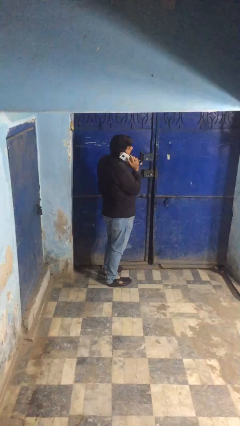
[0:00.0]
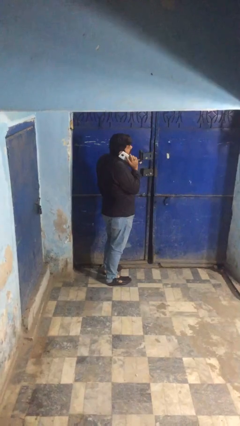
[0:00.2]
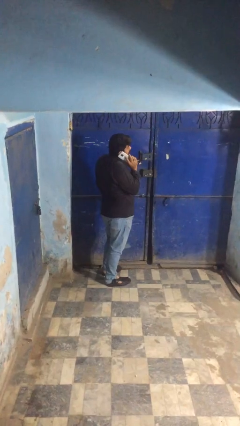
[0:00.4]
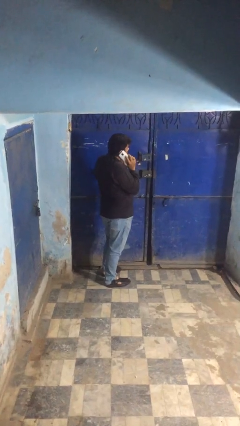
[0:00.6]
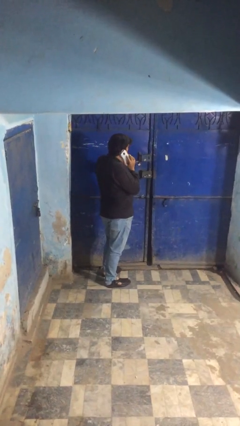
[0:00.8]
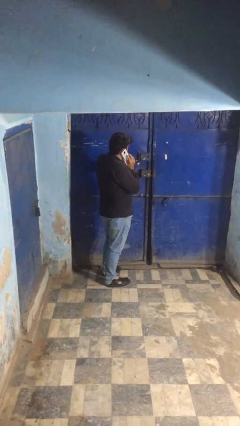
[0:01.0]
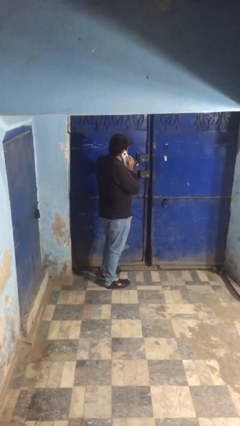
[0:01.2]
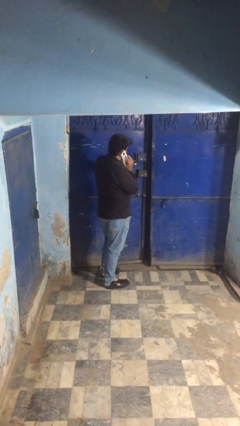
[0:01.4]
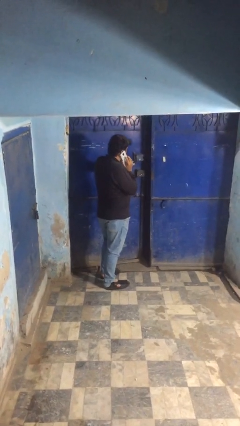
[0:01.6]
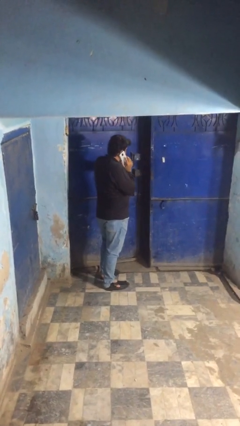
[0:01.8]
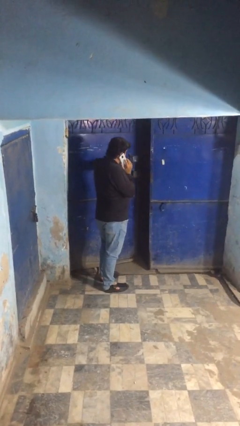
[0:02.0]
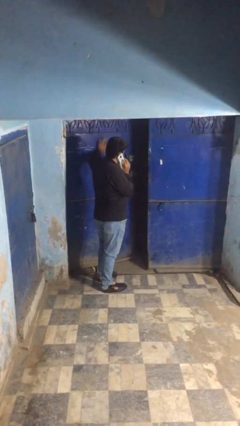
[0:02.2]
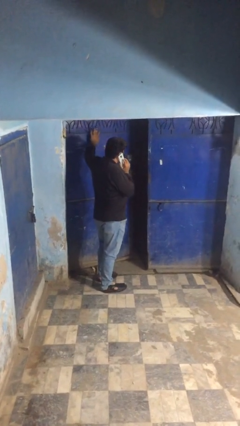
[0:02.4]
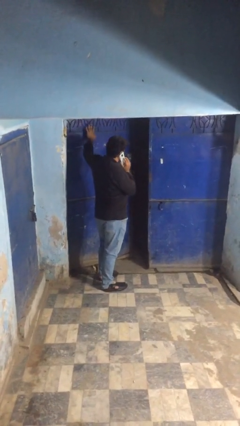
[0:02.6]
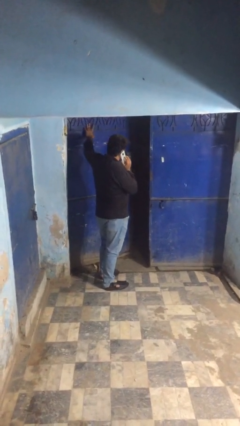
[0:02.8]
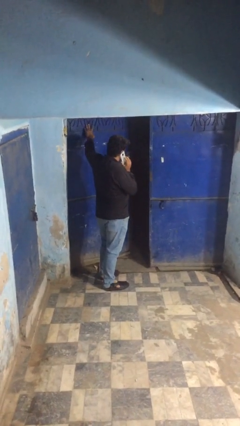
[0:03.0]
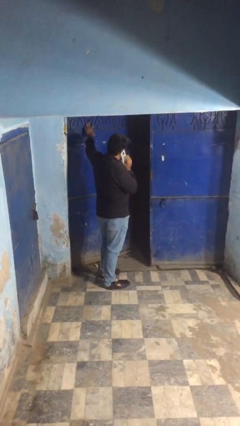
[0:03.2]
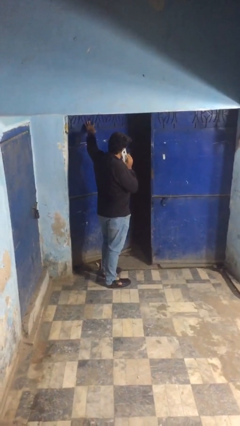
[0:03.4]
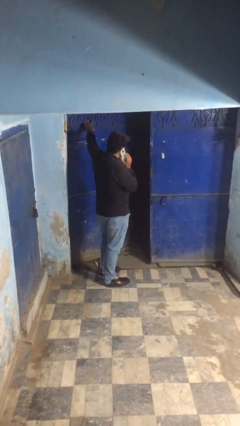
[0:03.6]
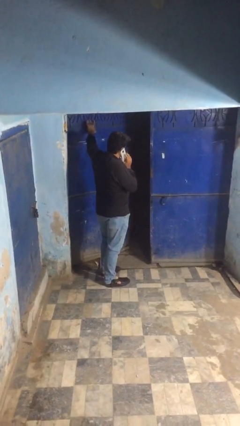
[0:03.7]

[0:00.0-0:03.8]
person opens facility door

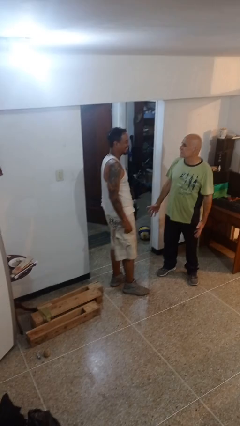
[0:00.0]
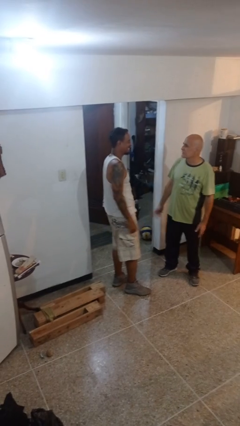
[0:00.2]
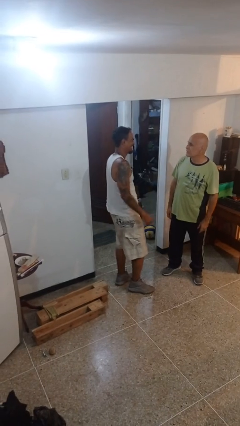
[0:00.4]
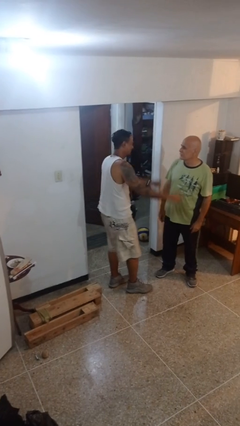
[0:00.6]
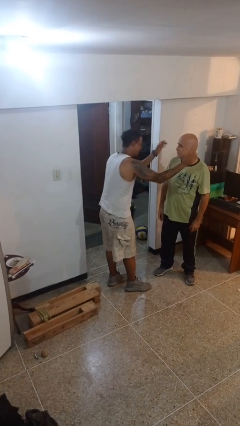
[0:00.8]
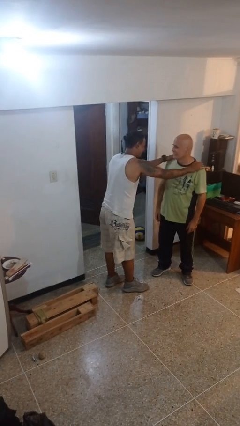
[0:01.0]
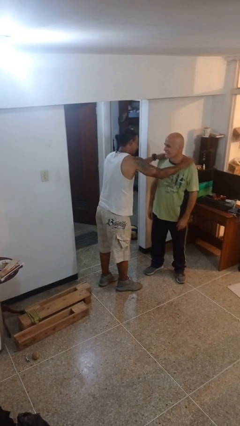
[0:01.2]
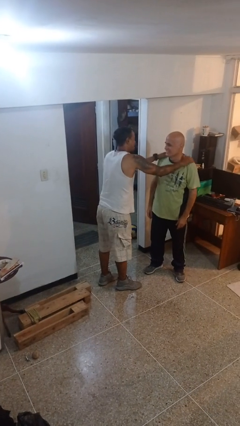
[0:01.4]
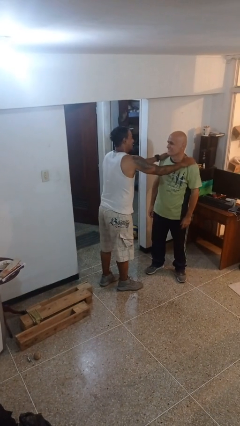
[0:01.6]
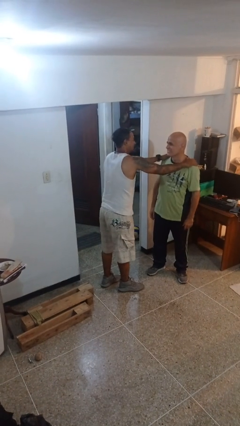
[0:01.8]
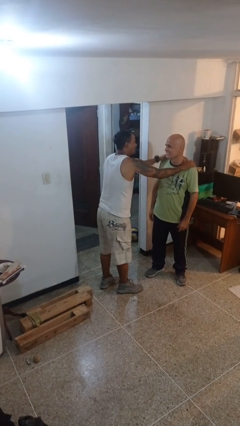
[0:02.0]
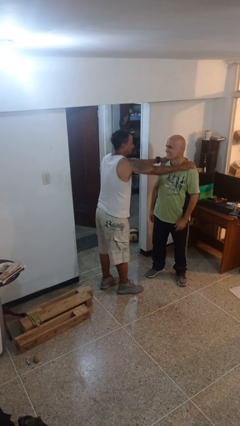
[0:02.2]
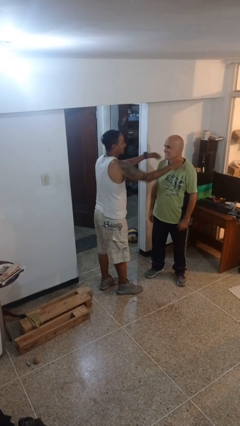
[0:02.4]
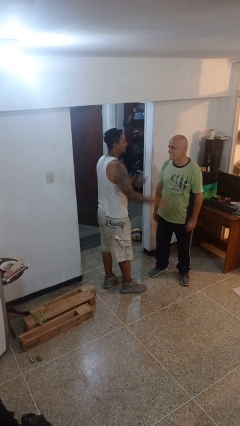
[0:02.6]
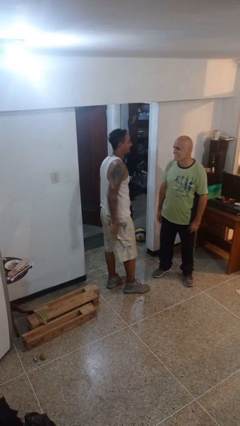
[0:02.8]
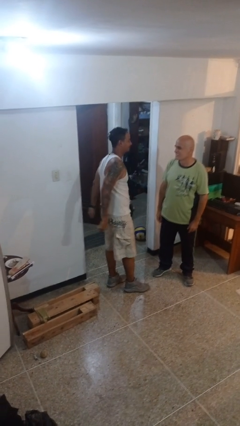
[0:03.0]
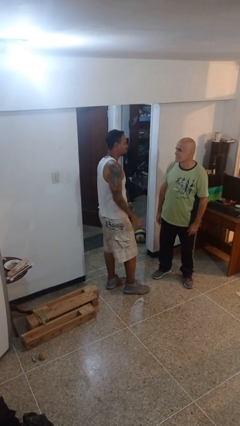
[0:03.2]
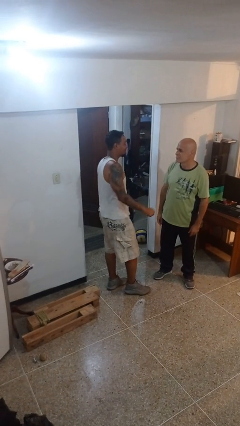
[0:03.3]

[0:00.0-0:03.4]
person pounds shoulders of person

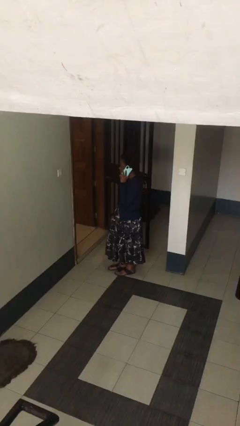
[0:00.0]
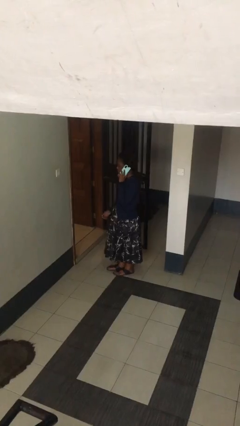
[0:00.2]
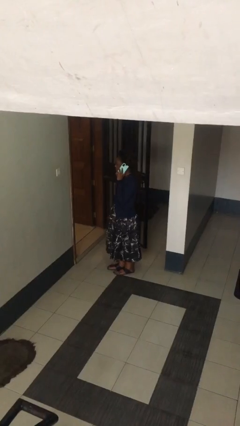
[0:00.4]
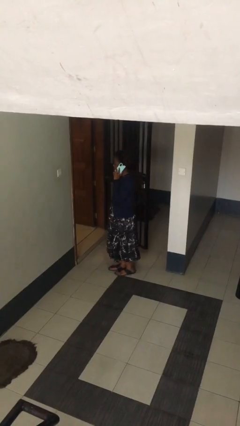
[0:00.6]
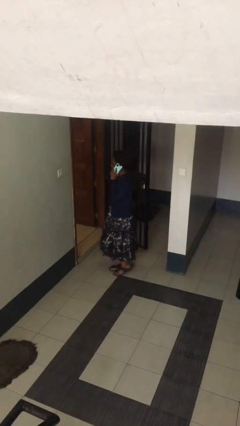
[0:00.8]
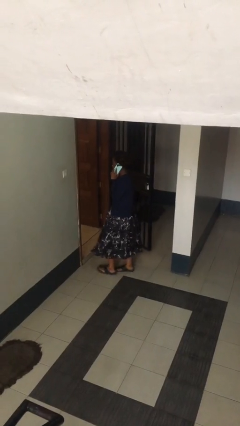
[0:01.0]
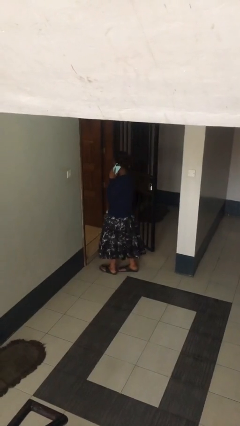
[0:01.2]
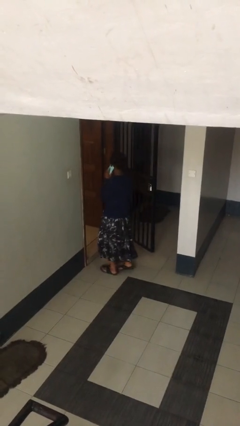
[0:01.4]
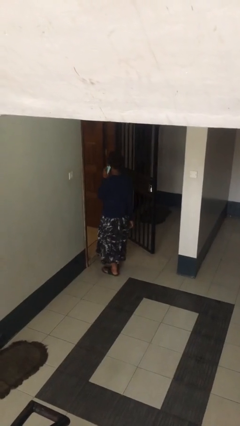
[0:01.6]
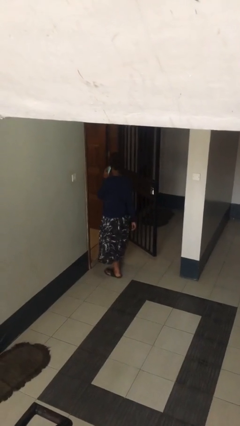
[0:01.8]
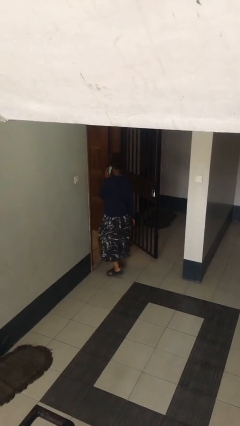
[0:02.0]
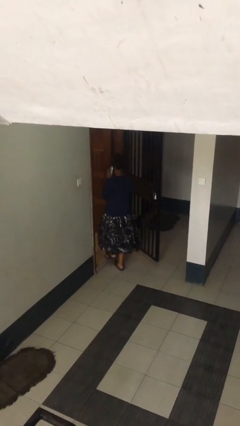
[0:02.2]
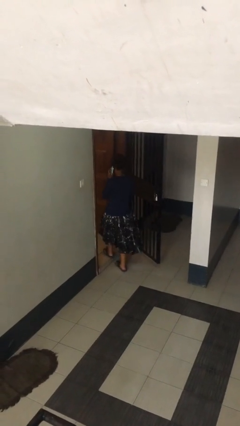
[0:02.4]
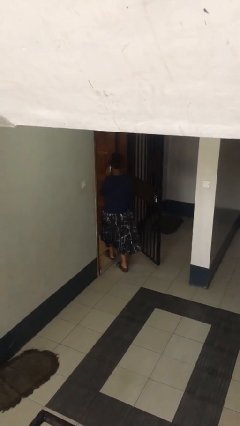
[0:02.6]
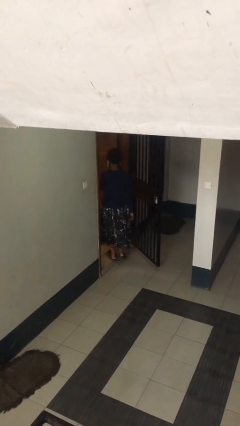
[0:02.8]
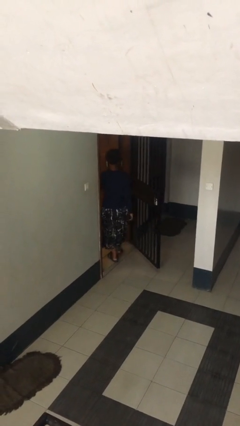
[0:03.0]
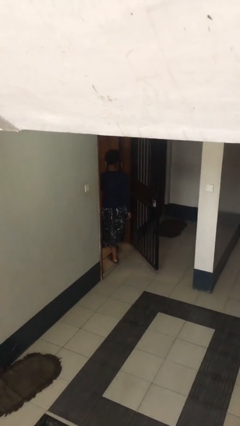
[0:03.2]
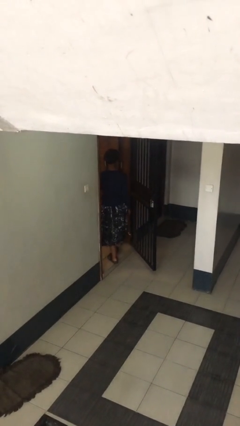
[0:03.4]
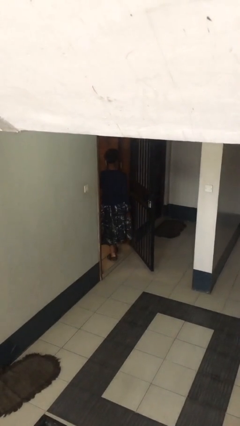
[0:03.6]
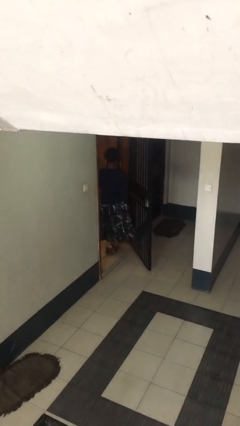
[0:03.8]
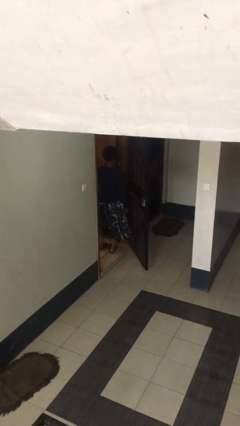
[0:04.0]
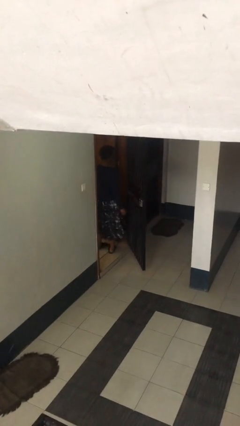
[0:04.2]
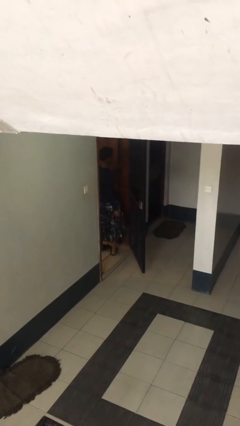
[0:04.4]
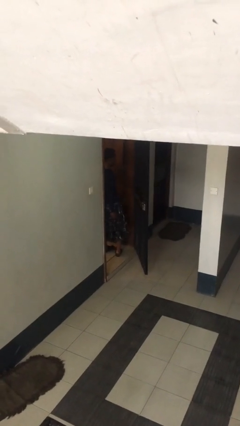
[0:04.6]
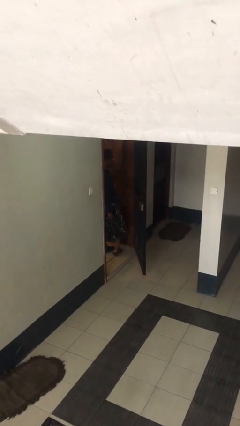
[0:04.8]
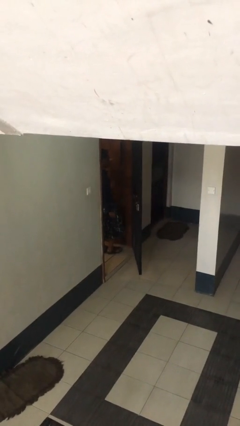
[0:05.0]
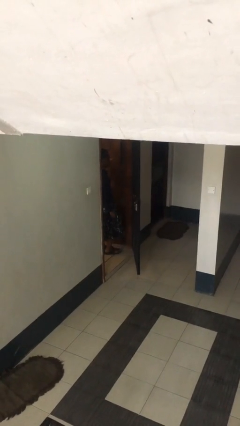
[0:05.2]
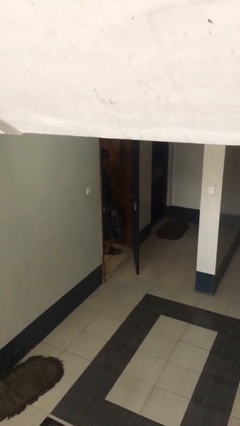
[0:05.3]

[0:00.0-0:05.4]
person exits scene through structure

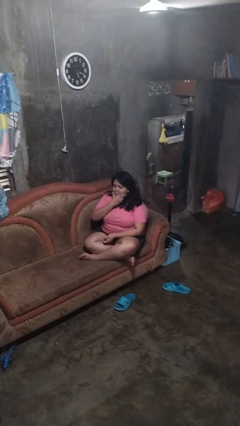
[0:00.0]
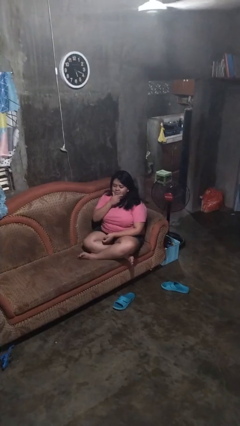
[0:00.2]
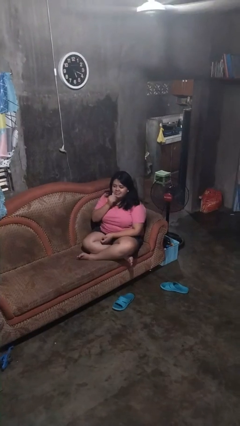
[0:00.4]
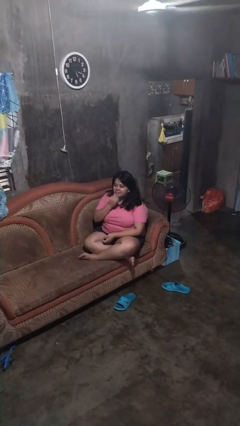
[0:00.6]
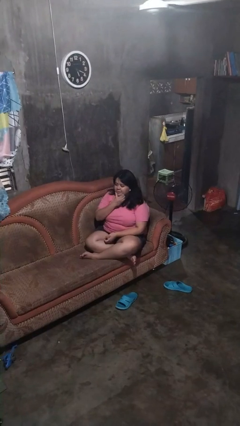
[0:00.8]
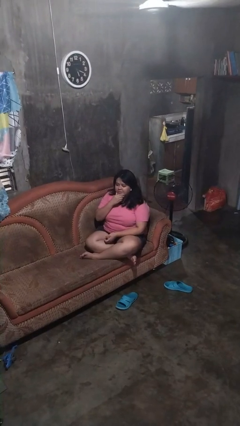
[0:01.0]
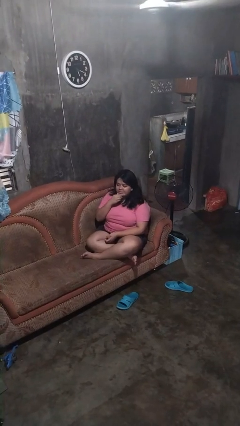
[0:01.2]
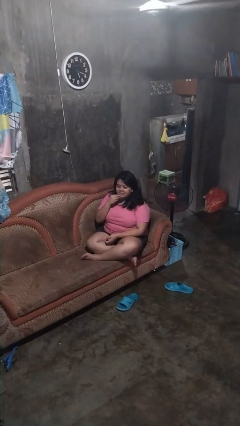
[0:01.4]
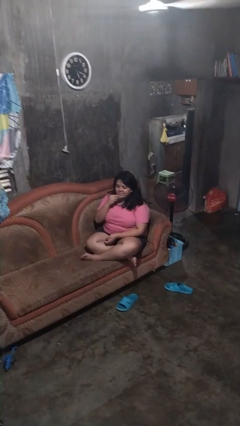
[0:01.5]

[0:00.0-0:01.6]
person strokes chin

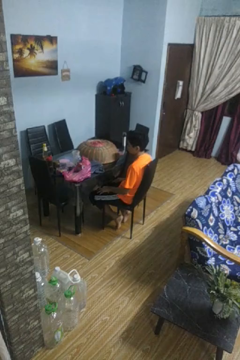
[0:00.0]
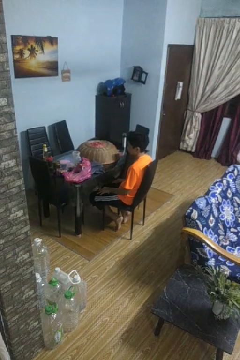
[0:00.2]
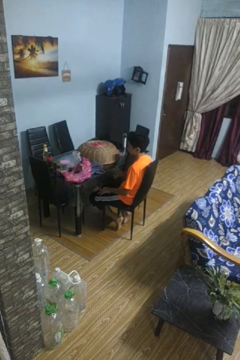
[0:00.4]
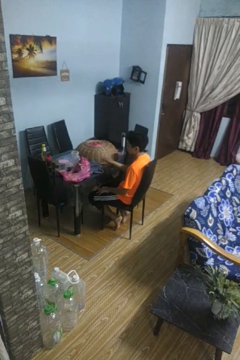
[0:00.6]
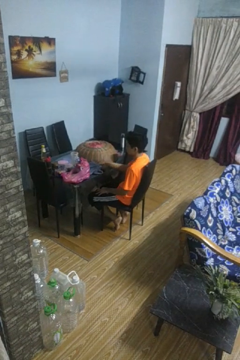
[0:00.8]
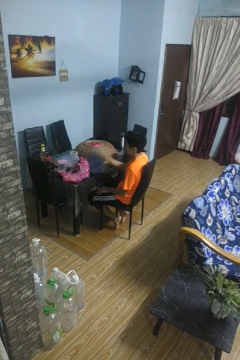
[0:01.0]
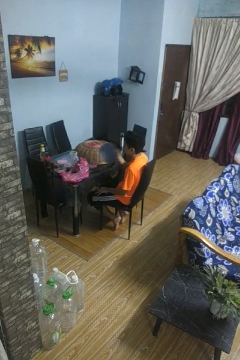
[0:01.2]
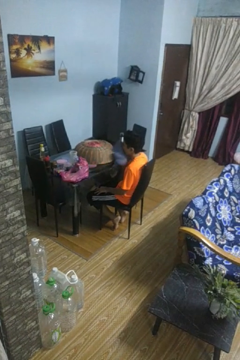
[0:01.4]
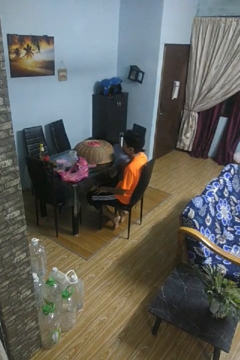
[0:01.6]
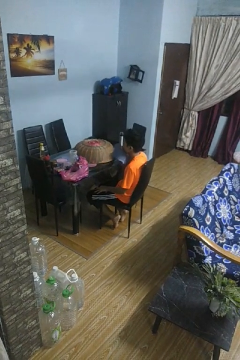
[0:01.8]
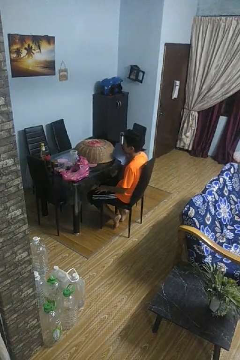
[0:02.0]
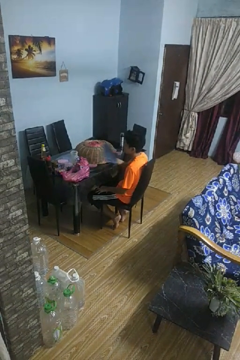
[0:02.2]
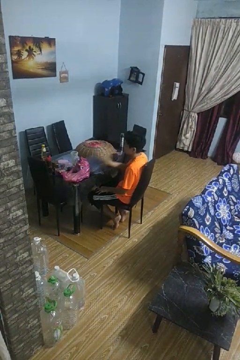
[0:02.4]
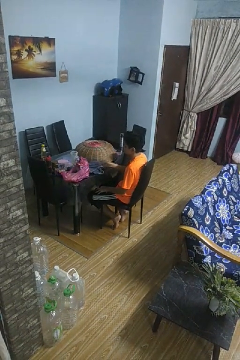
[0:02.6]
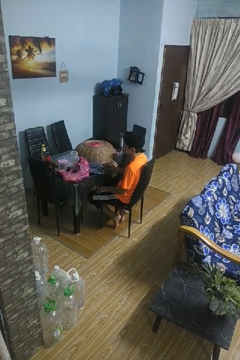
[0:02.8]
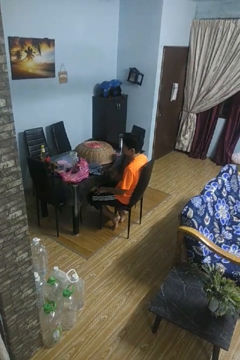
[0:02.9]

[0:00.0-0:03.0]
person wipes mouth with napkin

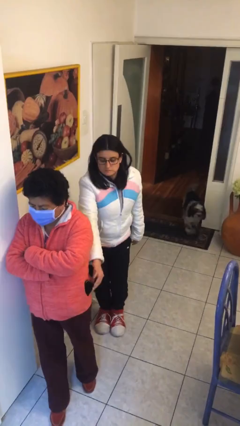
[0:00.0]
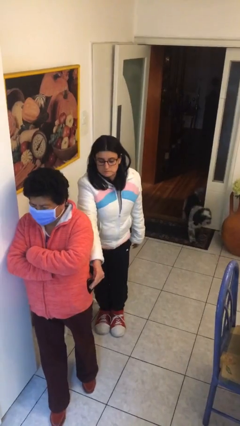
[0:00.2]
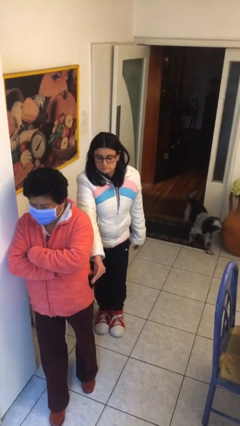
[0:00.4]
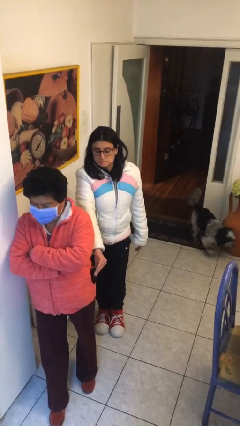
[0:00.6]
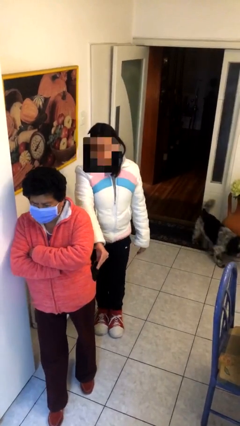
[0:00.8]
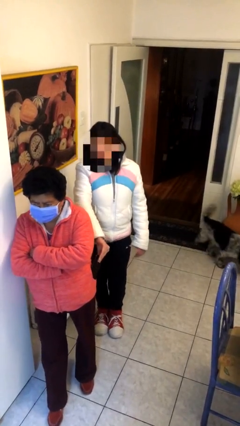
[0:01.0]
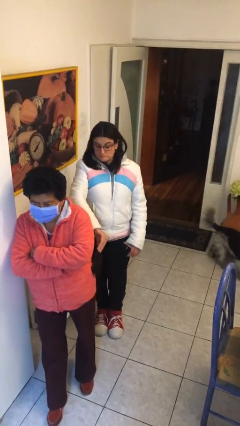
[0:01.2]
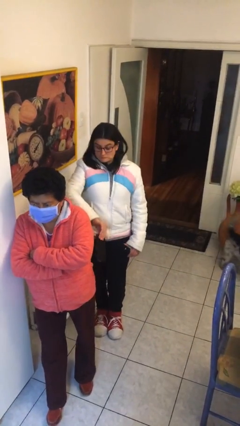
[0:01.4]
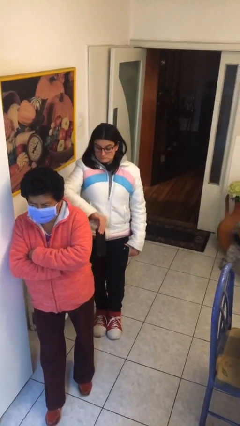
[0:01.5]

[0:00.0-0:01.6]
person steals object from person
